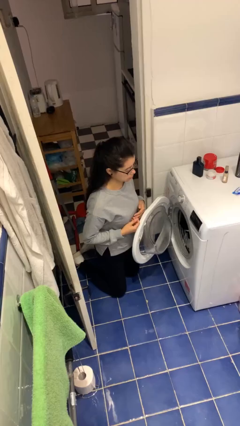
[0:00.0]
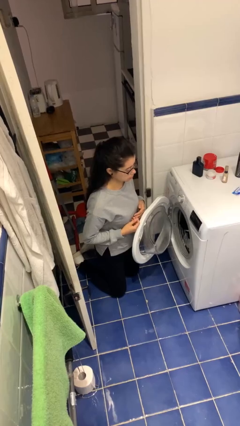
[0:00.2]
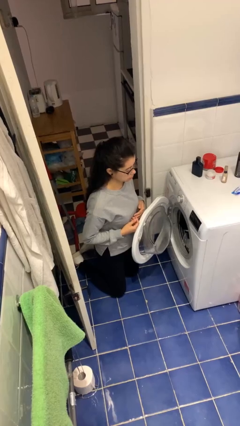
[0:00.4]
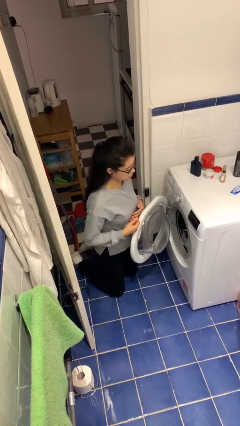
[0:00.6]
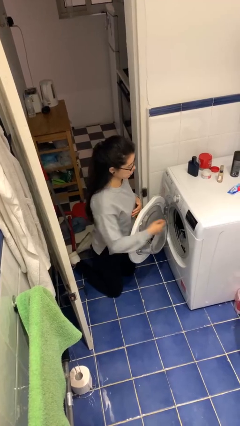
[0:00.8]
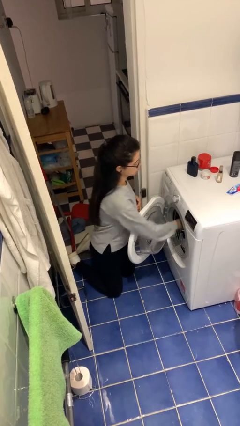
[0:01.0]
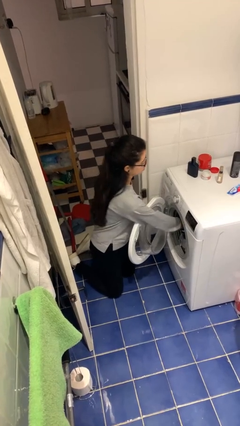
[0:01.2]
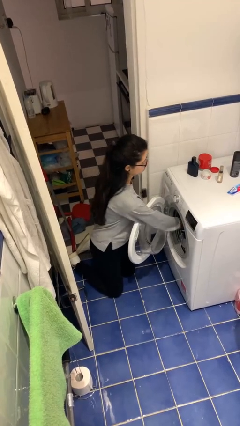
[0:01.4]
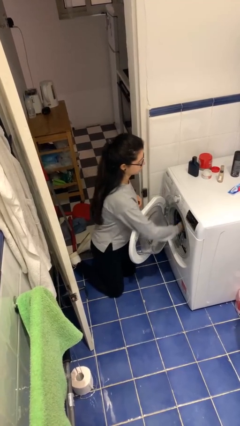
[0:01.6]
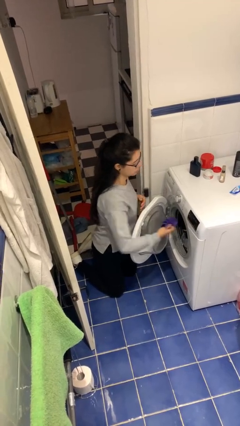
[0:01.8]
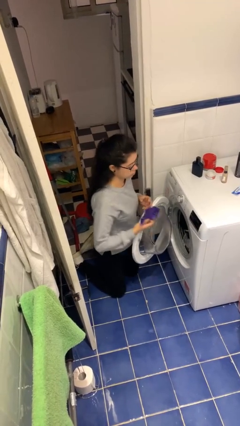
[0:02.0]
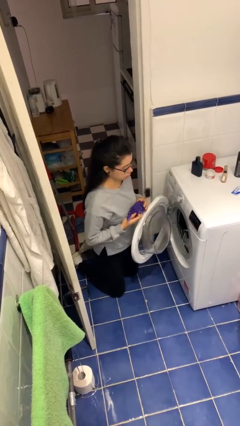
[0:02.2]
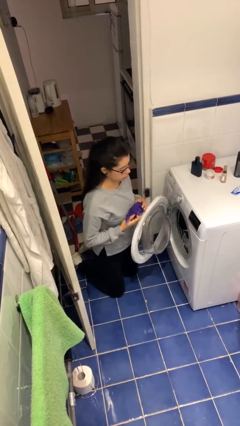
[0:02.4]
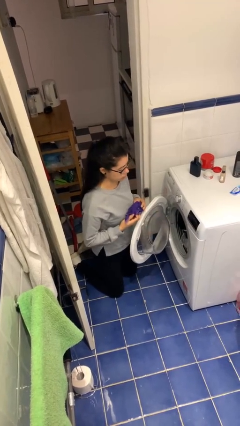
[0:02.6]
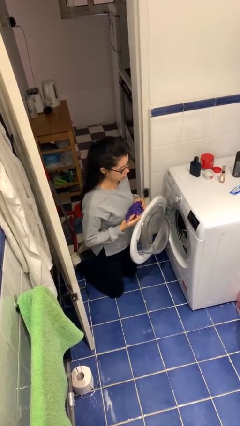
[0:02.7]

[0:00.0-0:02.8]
person unloads clotheswasher

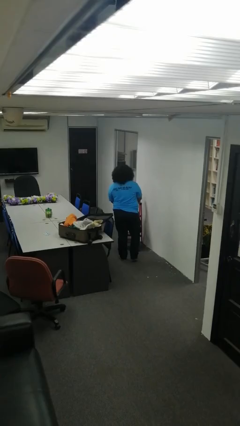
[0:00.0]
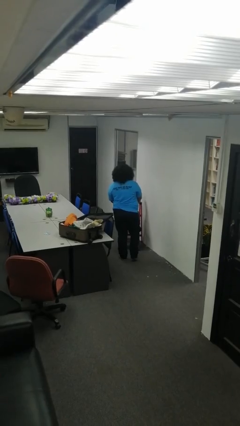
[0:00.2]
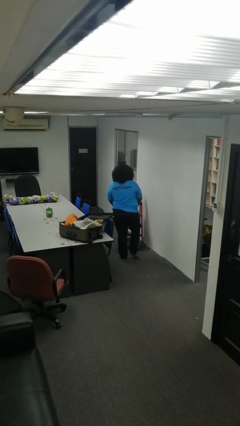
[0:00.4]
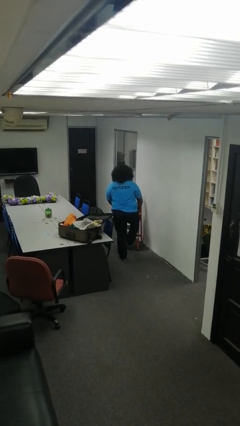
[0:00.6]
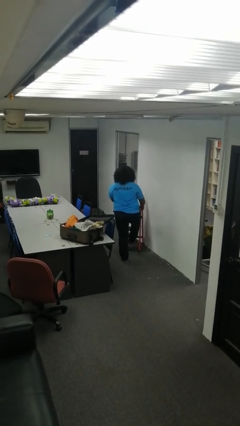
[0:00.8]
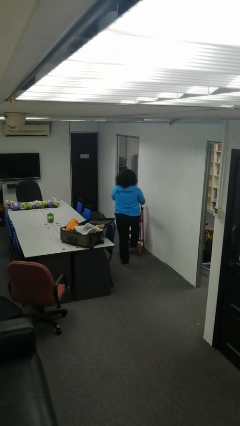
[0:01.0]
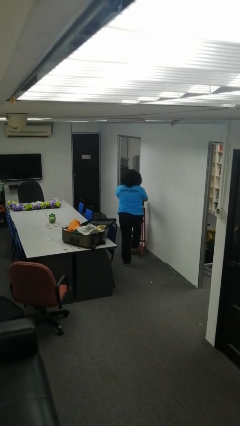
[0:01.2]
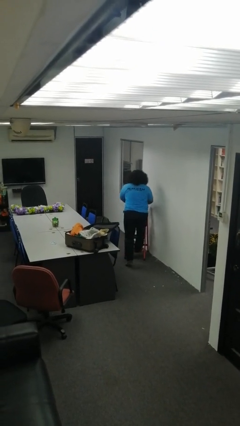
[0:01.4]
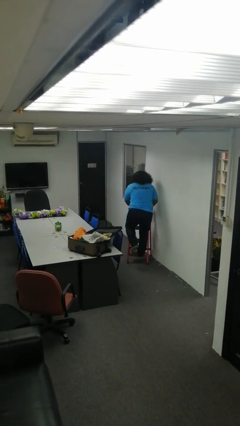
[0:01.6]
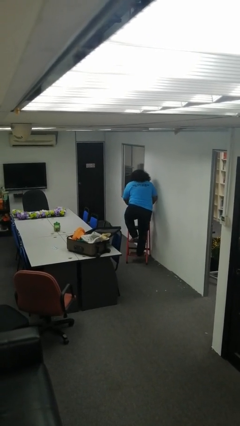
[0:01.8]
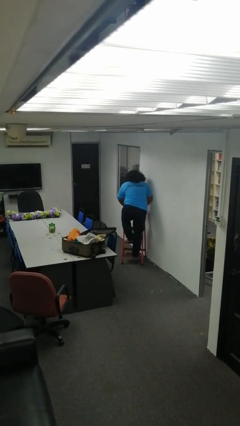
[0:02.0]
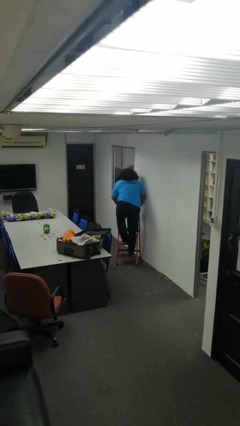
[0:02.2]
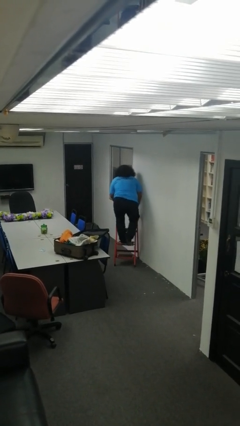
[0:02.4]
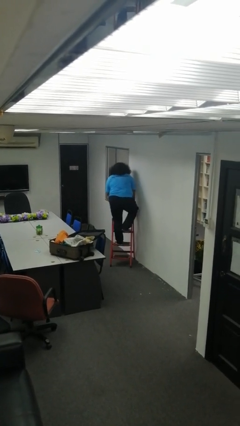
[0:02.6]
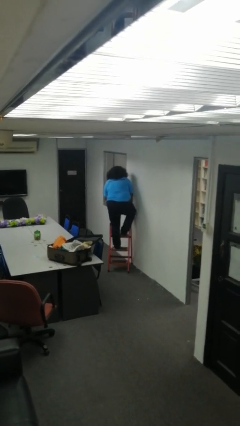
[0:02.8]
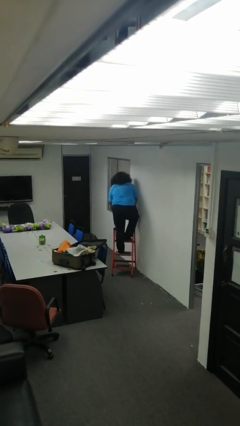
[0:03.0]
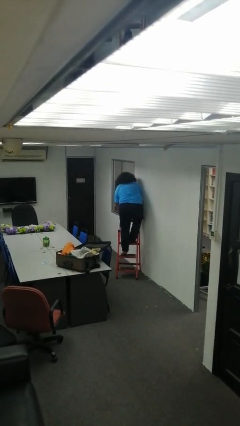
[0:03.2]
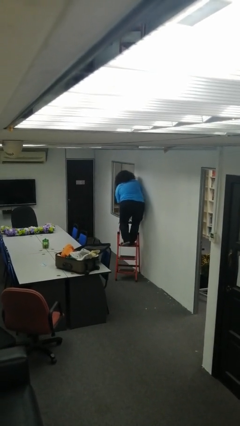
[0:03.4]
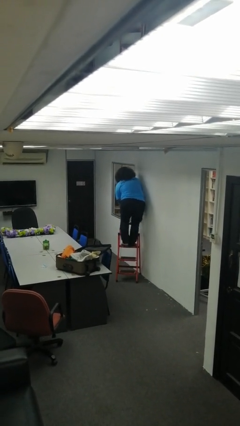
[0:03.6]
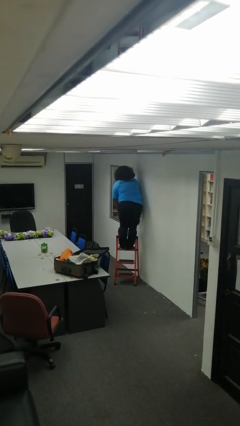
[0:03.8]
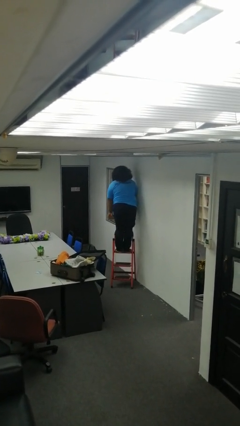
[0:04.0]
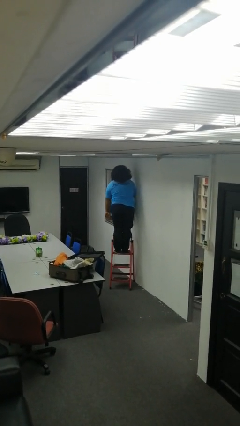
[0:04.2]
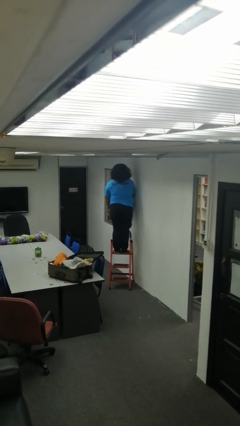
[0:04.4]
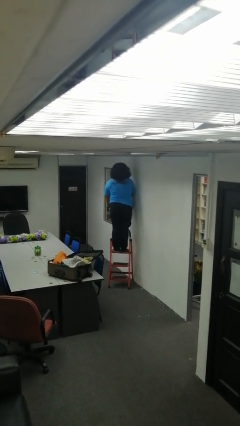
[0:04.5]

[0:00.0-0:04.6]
person climbs up ladder

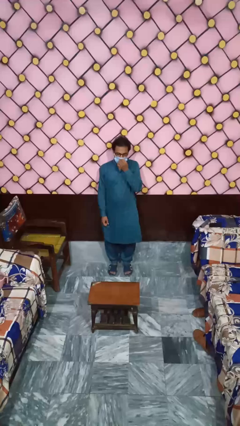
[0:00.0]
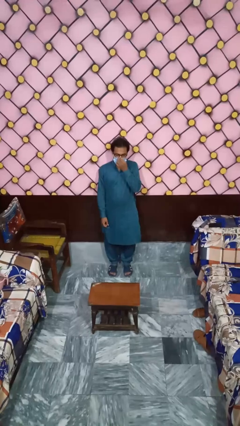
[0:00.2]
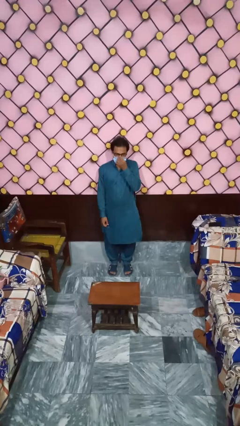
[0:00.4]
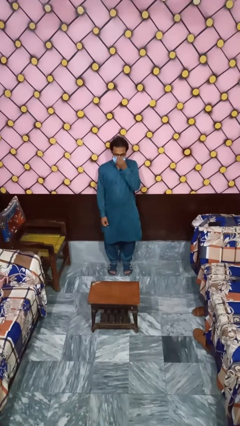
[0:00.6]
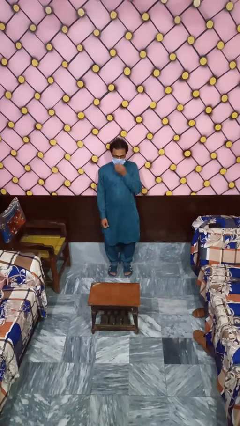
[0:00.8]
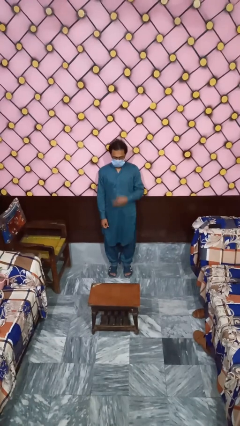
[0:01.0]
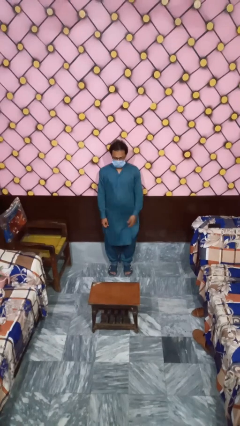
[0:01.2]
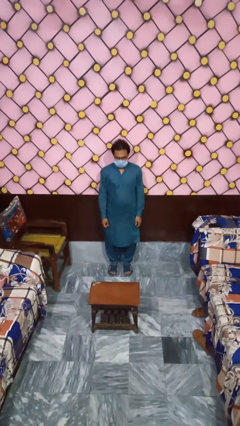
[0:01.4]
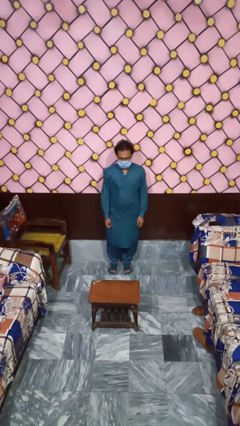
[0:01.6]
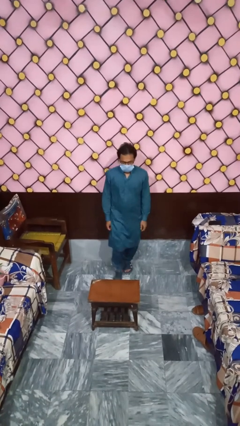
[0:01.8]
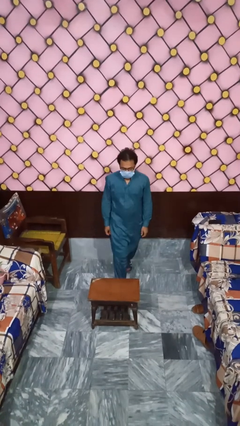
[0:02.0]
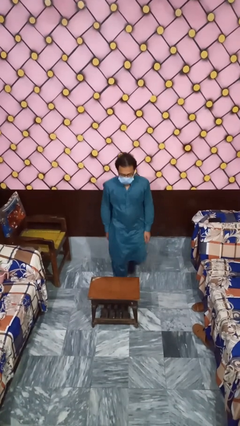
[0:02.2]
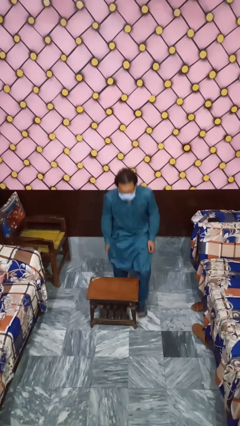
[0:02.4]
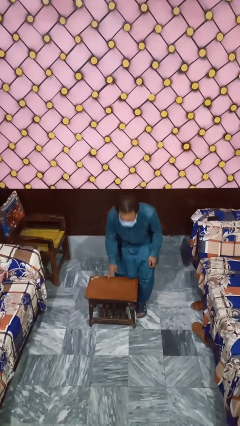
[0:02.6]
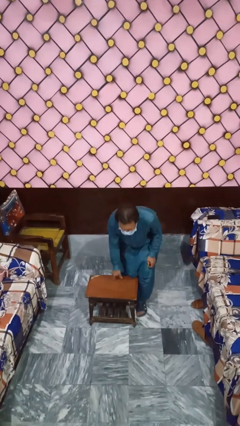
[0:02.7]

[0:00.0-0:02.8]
person bumps into table

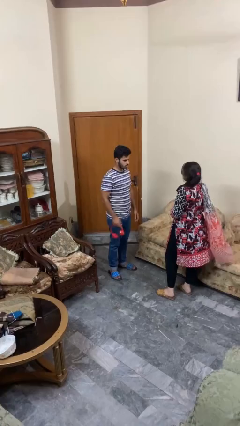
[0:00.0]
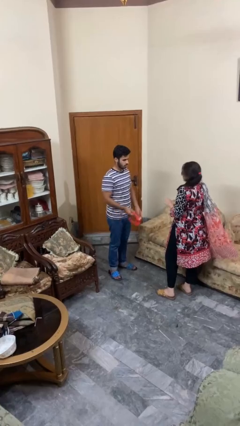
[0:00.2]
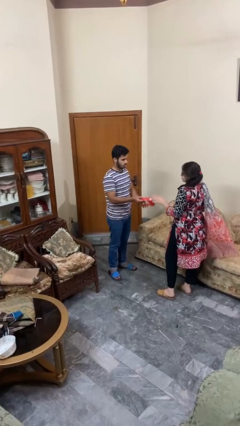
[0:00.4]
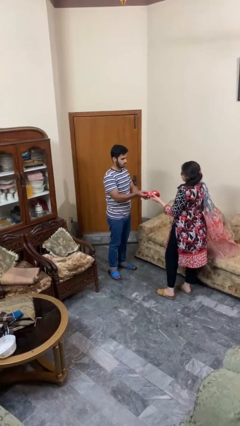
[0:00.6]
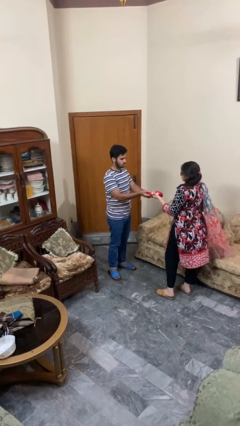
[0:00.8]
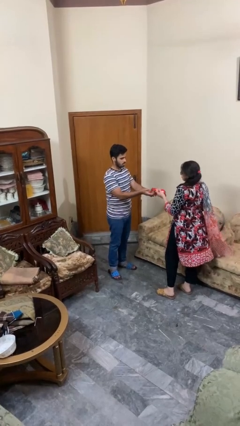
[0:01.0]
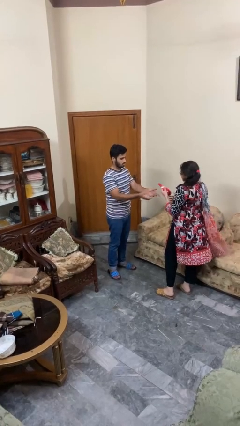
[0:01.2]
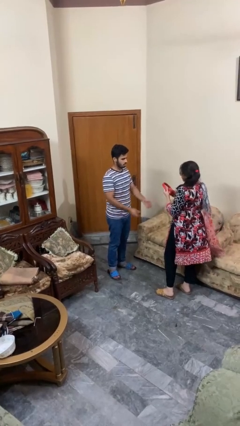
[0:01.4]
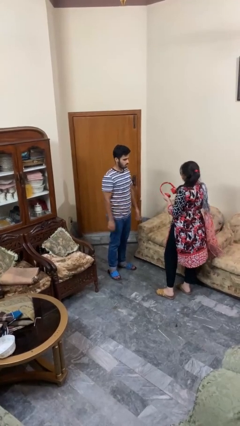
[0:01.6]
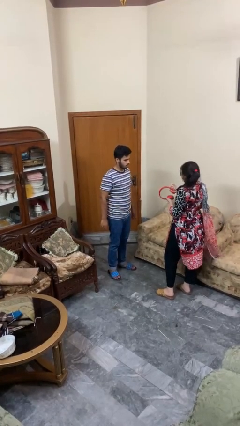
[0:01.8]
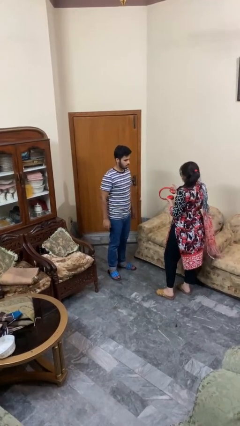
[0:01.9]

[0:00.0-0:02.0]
person transfers object to person

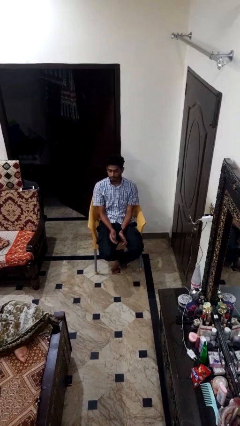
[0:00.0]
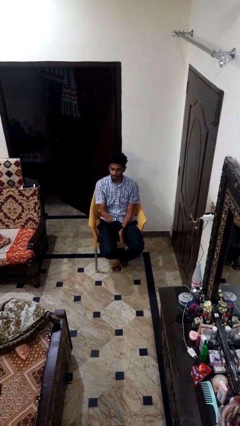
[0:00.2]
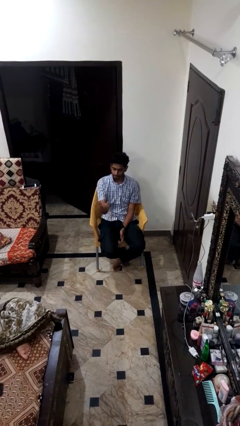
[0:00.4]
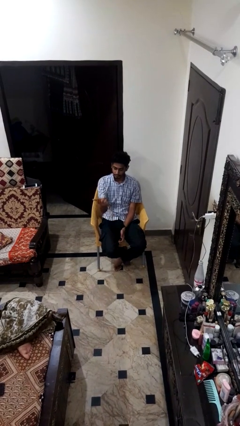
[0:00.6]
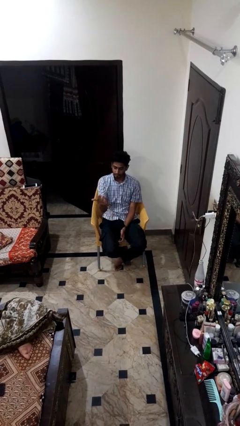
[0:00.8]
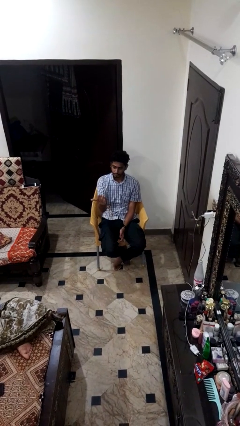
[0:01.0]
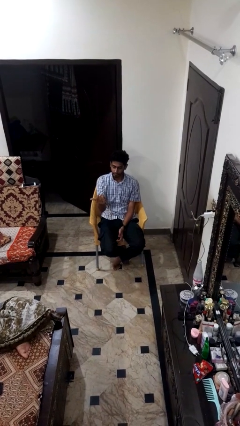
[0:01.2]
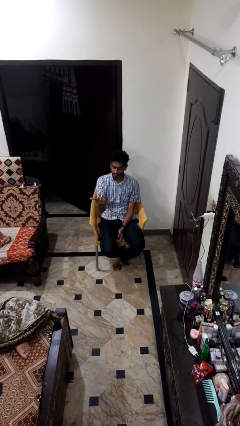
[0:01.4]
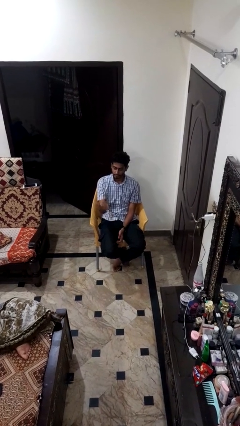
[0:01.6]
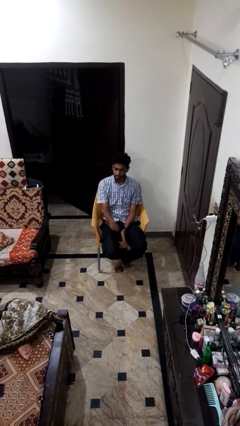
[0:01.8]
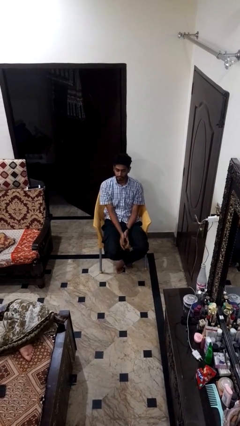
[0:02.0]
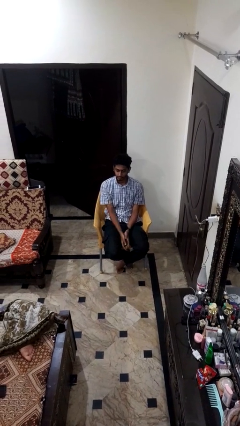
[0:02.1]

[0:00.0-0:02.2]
person gestures come here

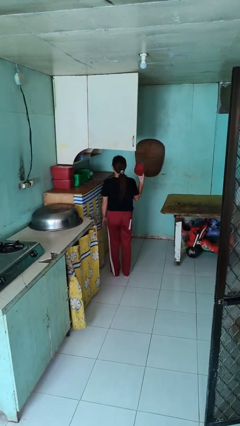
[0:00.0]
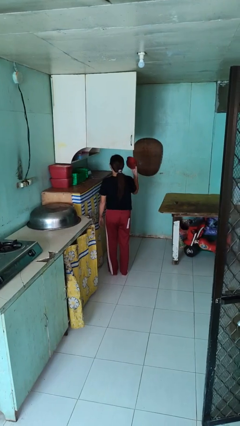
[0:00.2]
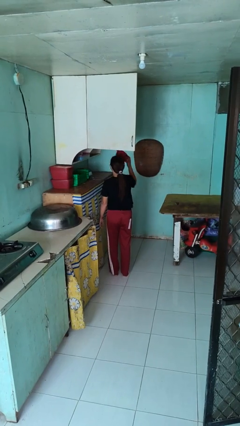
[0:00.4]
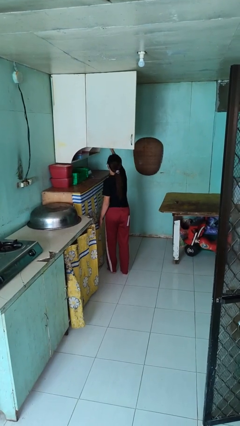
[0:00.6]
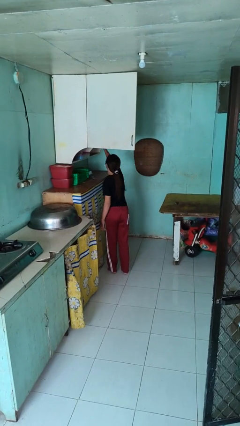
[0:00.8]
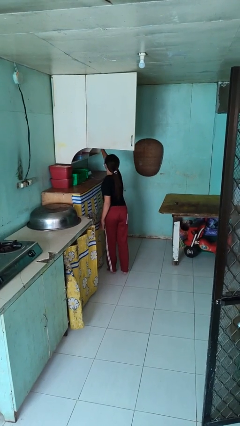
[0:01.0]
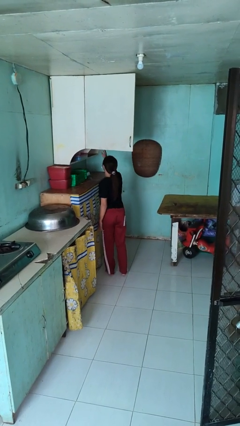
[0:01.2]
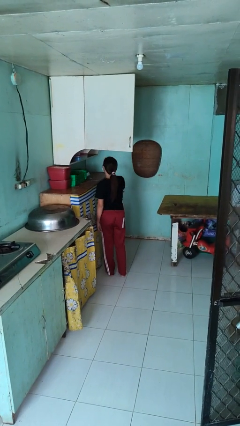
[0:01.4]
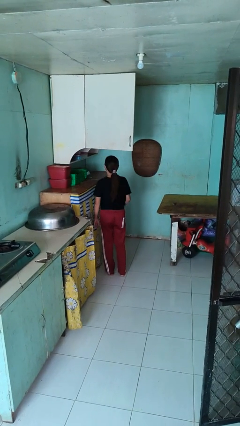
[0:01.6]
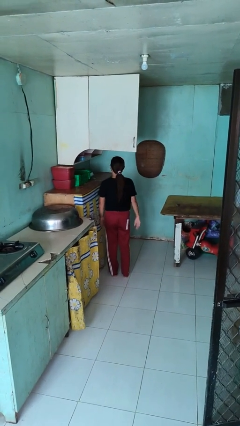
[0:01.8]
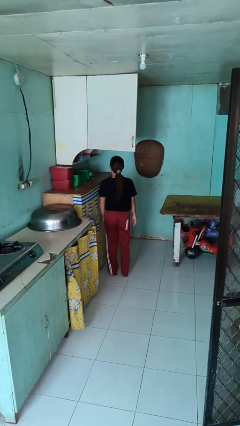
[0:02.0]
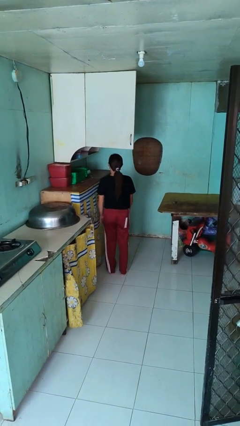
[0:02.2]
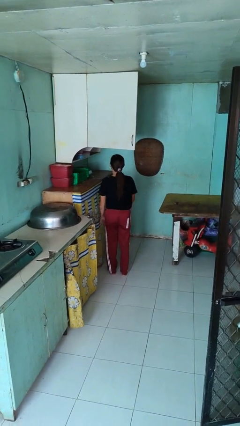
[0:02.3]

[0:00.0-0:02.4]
person puts object in cabinet
